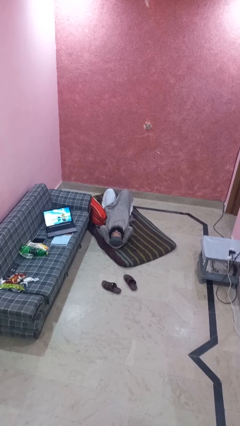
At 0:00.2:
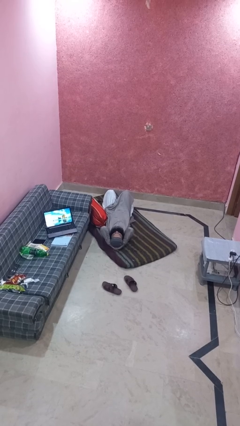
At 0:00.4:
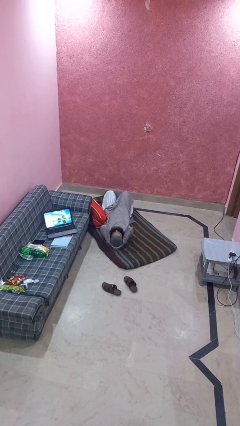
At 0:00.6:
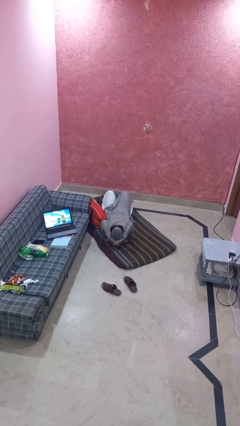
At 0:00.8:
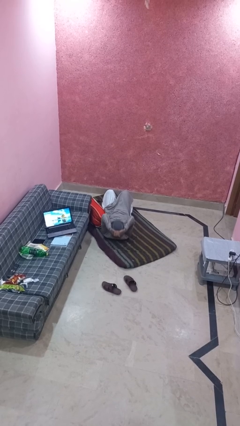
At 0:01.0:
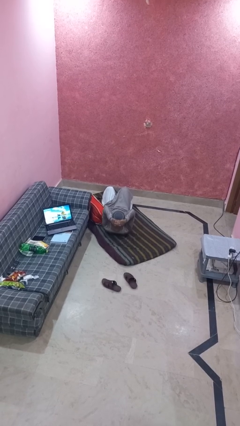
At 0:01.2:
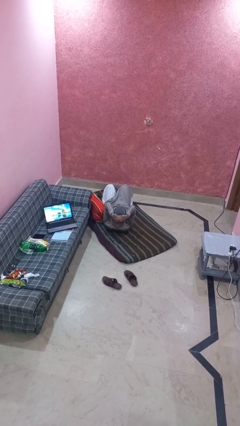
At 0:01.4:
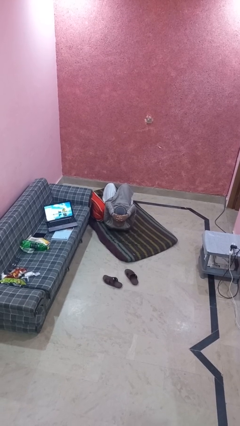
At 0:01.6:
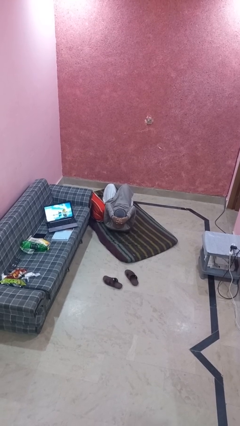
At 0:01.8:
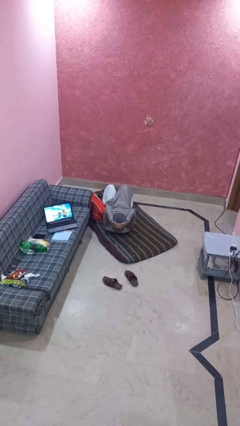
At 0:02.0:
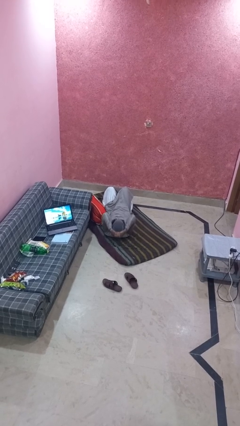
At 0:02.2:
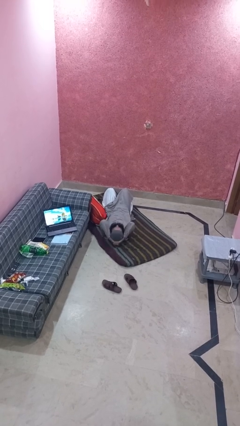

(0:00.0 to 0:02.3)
person exercises with situp

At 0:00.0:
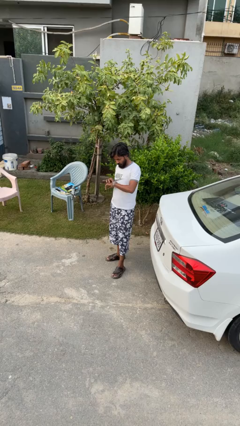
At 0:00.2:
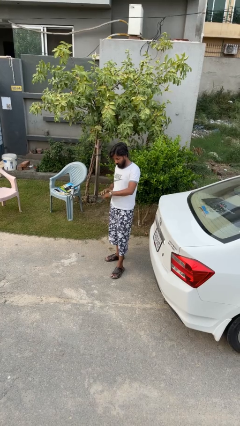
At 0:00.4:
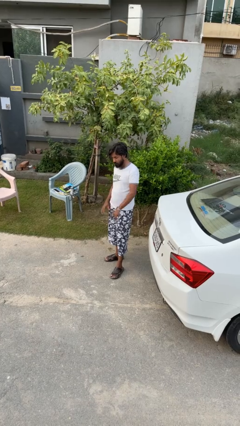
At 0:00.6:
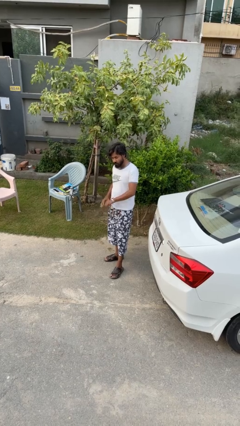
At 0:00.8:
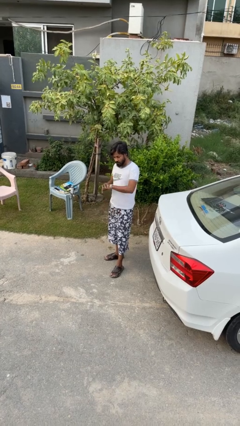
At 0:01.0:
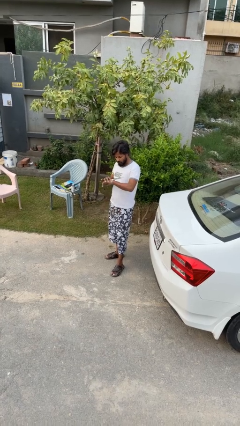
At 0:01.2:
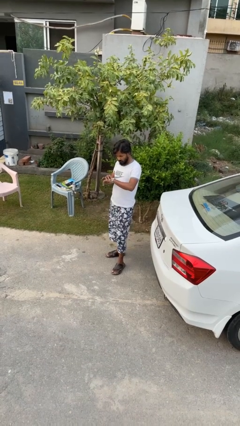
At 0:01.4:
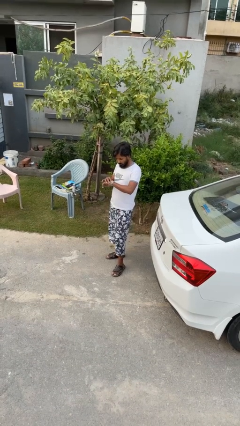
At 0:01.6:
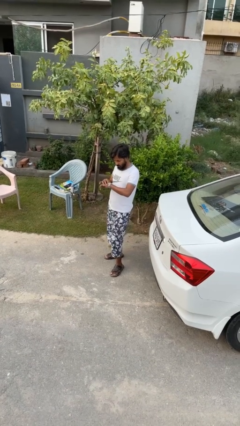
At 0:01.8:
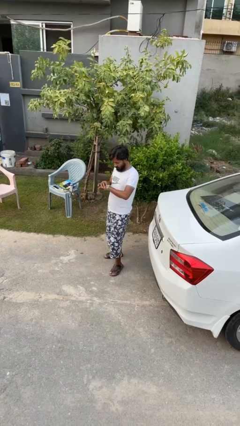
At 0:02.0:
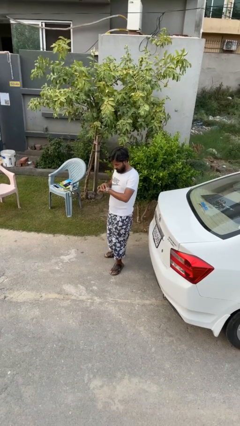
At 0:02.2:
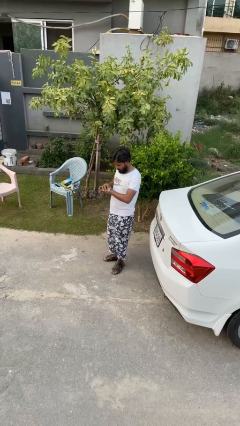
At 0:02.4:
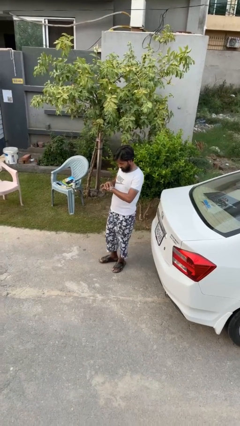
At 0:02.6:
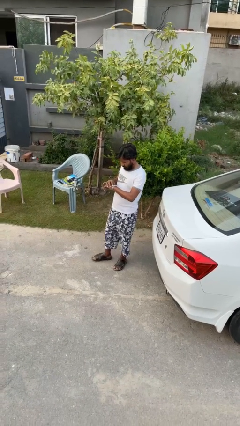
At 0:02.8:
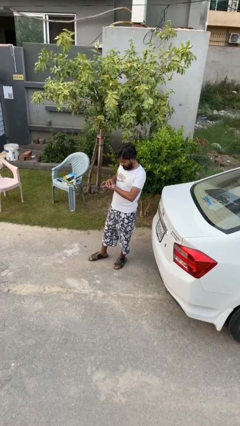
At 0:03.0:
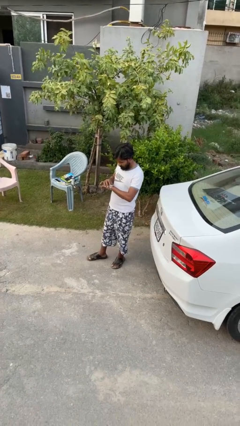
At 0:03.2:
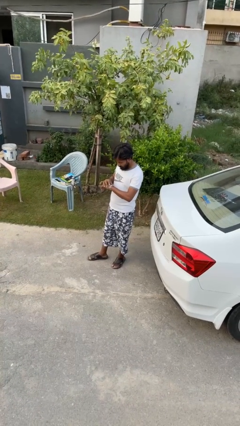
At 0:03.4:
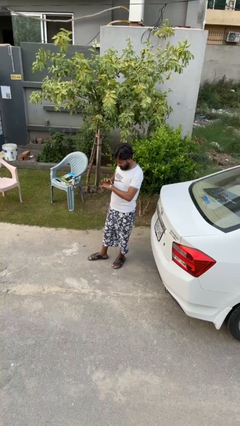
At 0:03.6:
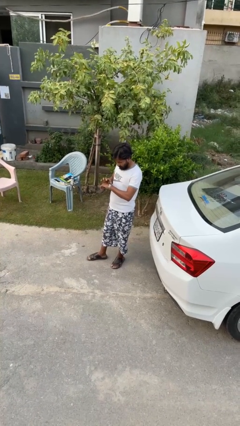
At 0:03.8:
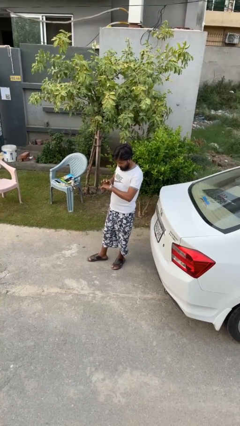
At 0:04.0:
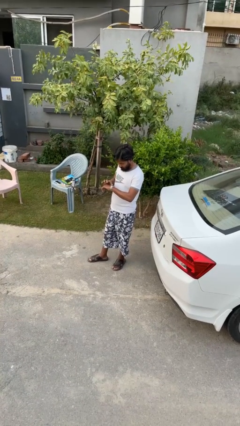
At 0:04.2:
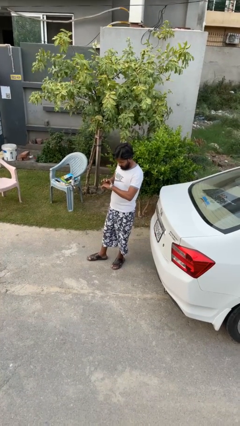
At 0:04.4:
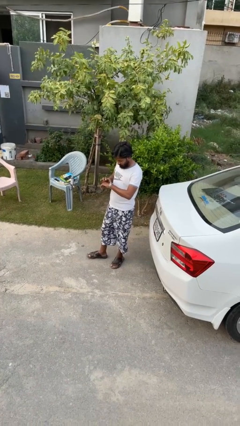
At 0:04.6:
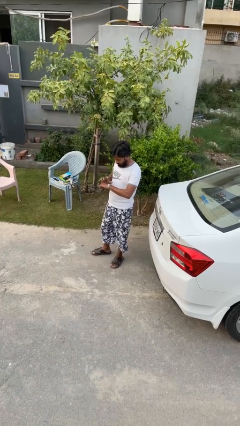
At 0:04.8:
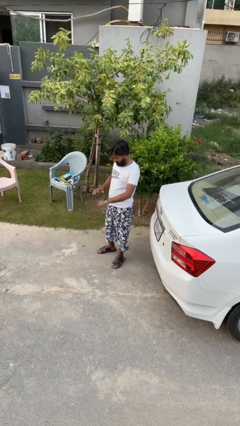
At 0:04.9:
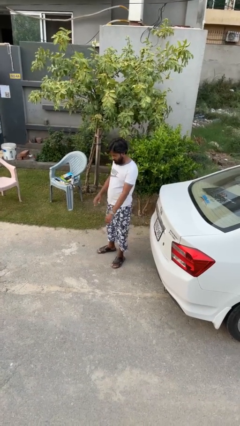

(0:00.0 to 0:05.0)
person looks at wristwatch

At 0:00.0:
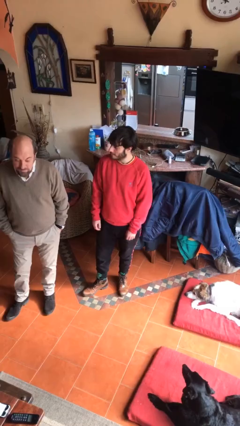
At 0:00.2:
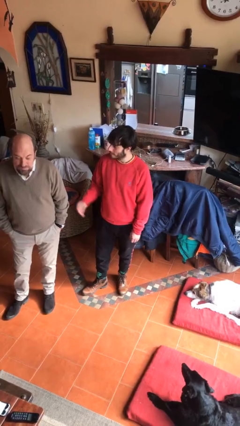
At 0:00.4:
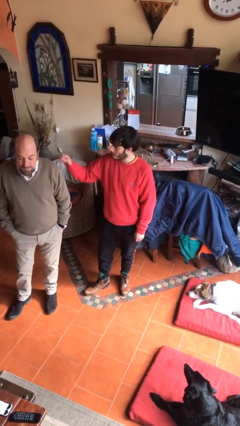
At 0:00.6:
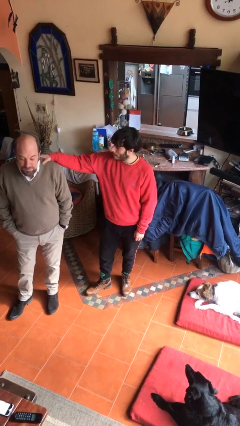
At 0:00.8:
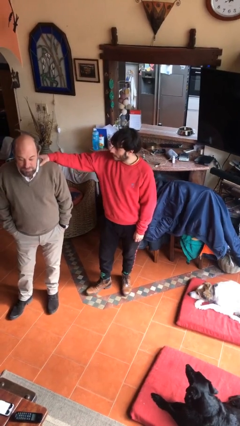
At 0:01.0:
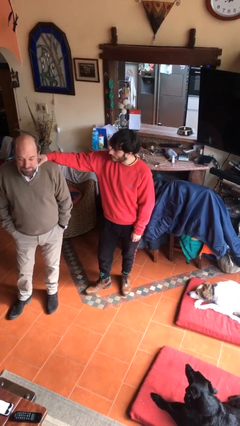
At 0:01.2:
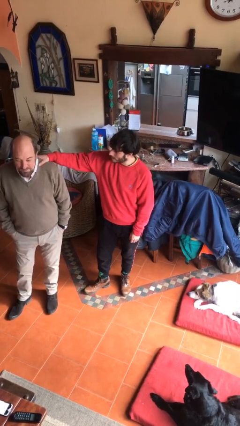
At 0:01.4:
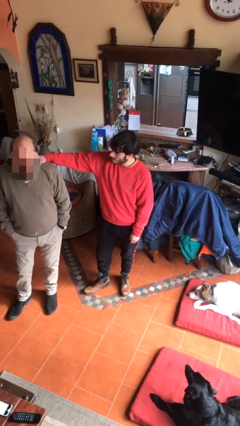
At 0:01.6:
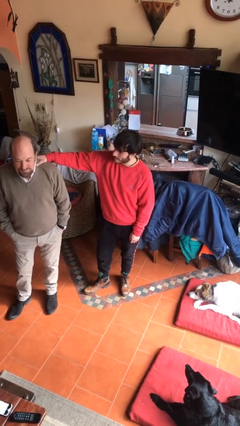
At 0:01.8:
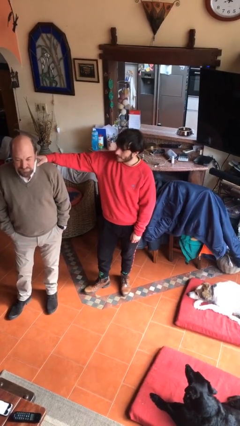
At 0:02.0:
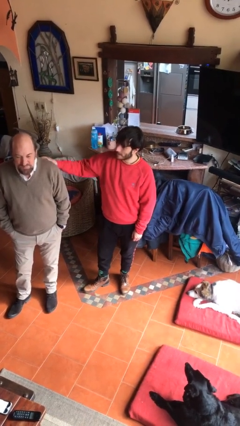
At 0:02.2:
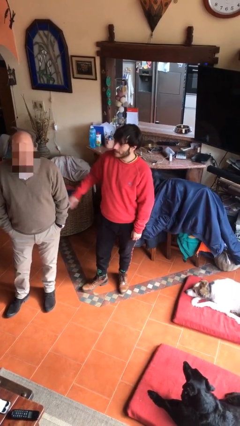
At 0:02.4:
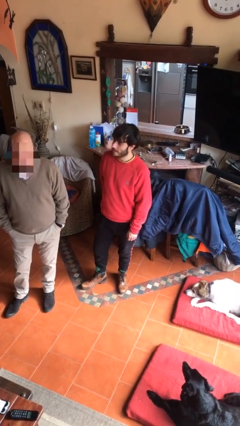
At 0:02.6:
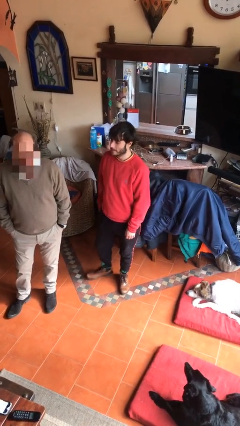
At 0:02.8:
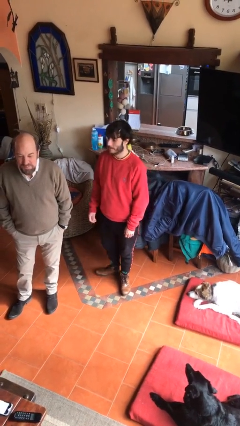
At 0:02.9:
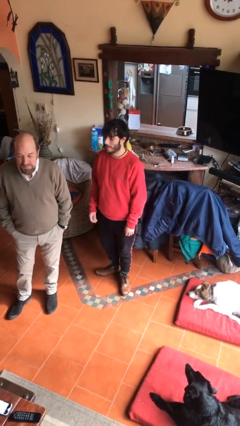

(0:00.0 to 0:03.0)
person pounds shoulders of person

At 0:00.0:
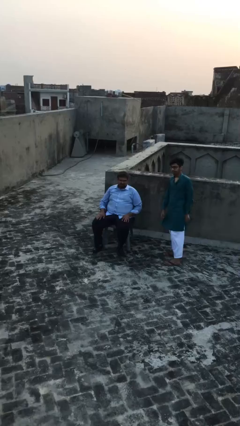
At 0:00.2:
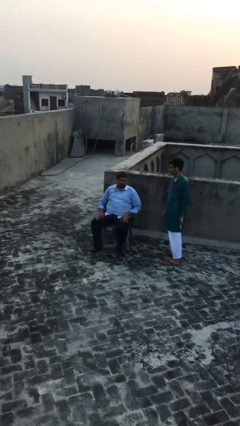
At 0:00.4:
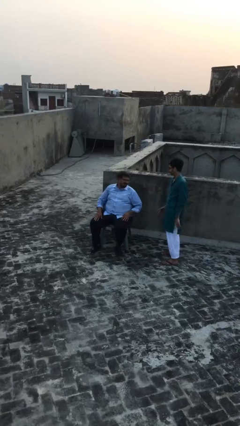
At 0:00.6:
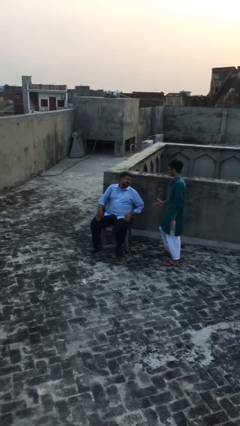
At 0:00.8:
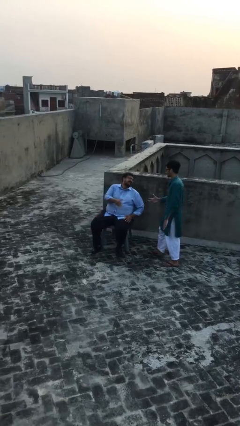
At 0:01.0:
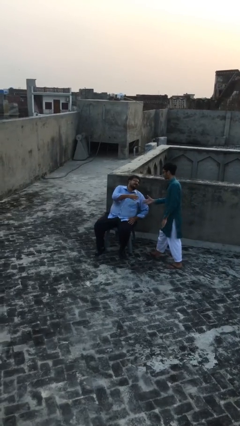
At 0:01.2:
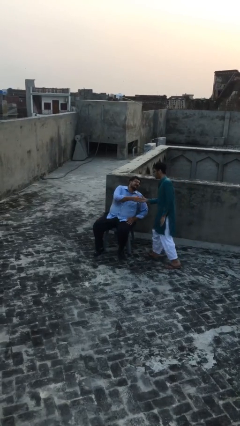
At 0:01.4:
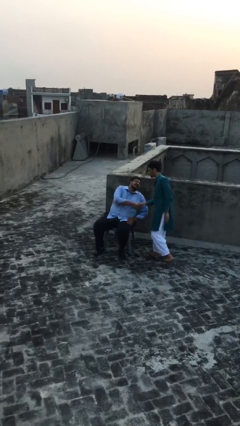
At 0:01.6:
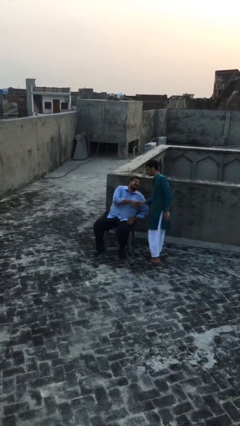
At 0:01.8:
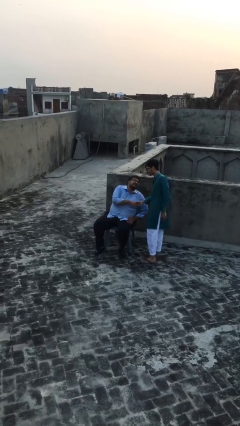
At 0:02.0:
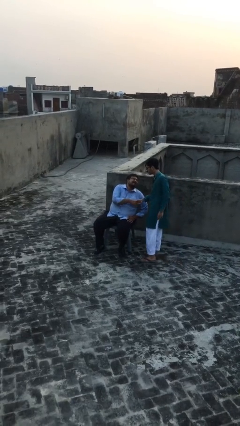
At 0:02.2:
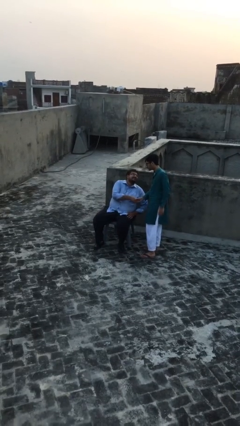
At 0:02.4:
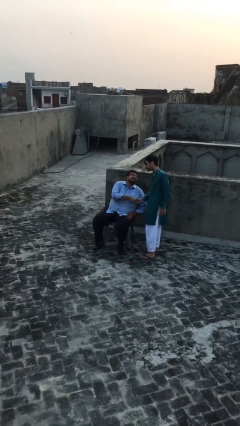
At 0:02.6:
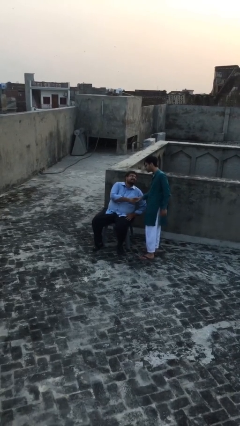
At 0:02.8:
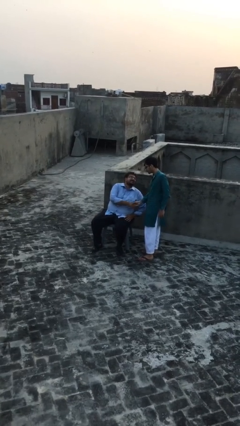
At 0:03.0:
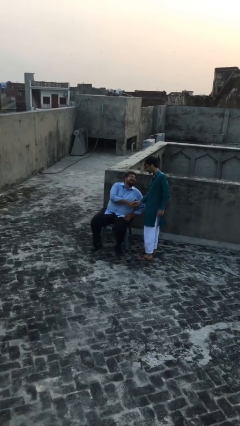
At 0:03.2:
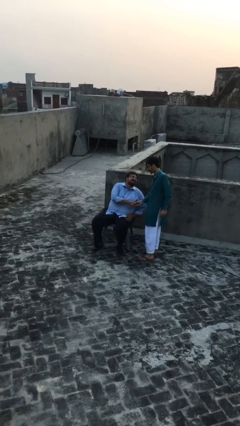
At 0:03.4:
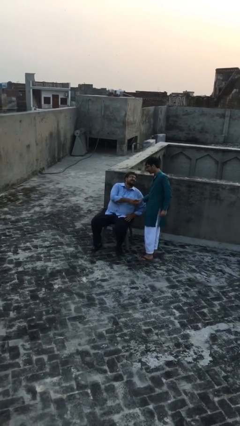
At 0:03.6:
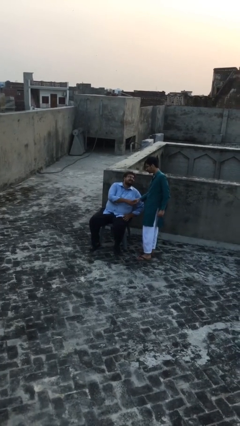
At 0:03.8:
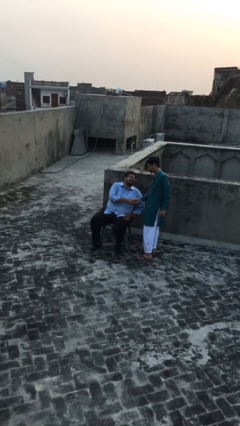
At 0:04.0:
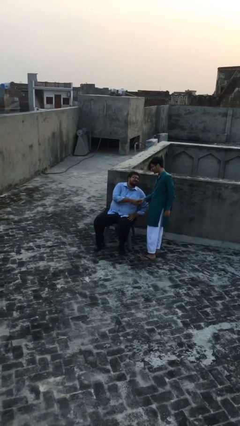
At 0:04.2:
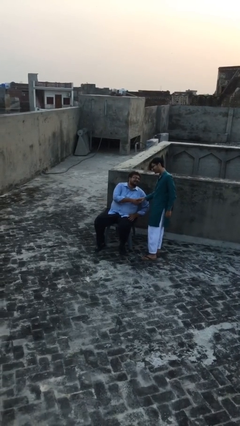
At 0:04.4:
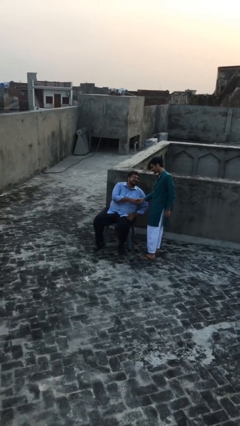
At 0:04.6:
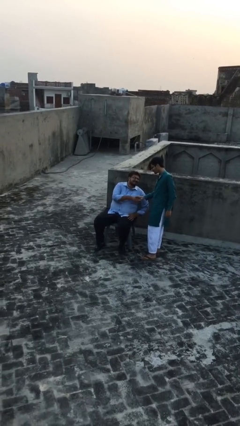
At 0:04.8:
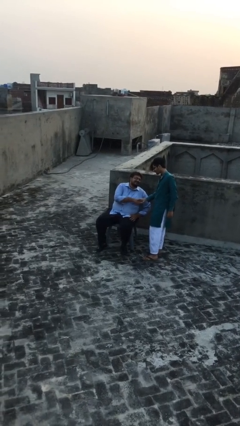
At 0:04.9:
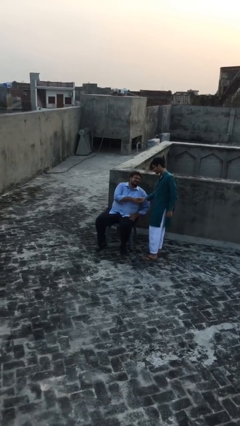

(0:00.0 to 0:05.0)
person shakes hand

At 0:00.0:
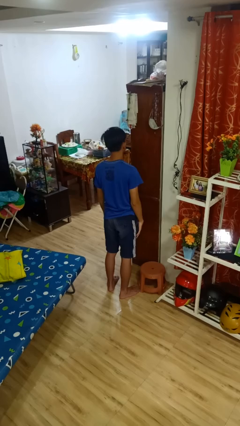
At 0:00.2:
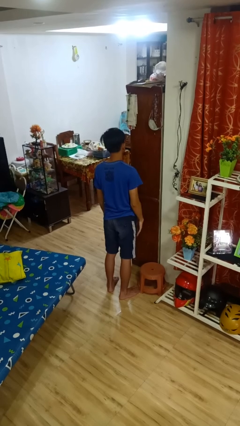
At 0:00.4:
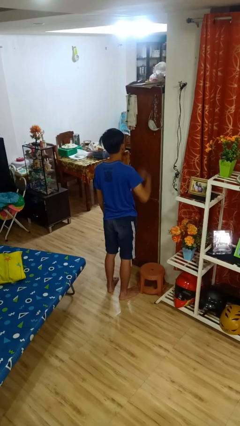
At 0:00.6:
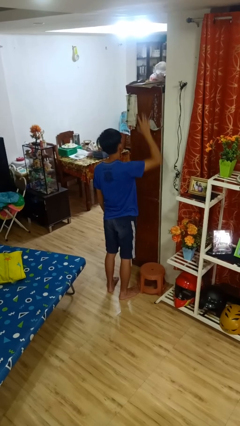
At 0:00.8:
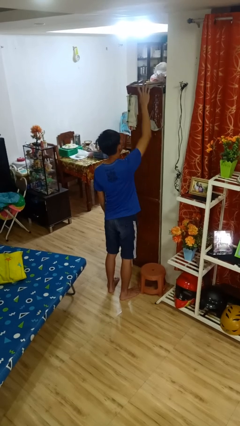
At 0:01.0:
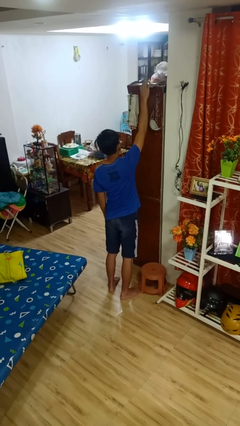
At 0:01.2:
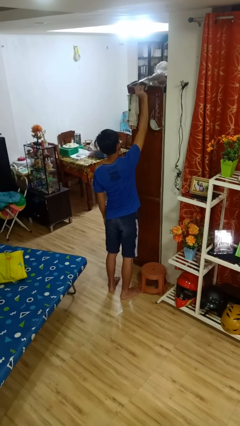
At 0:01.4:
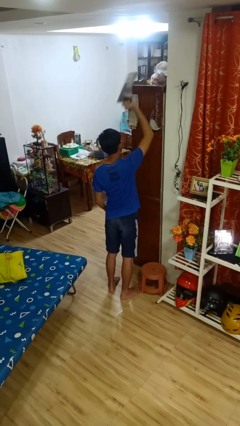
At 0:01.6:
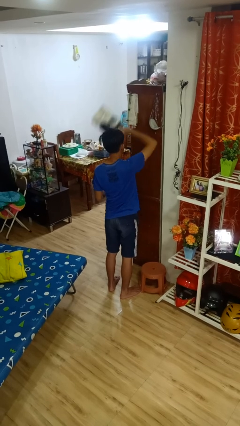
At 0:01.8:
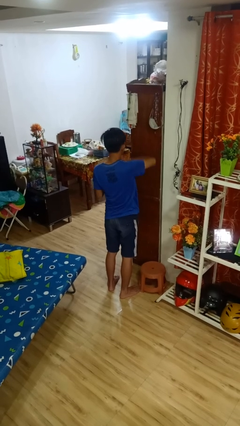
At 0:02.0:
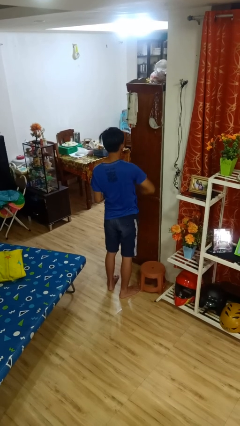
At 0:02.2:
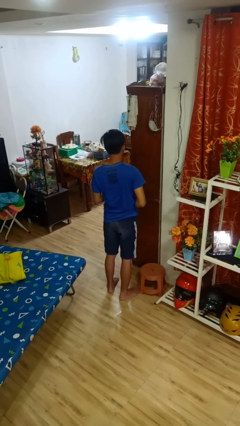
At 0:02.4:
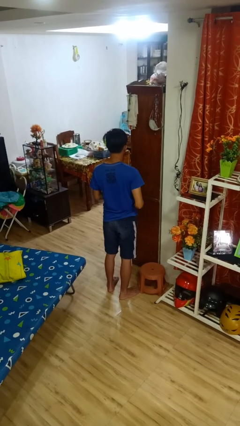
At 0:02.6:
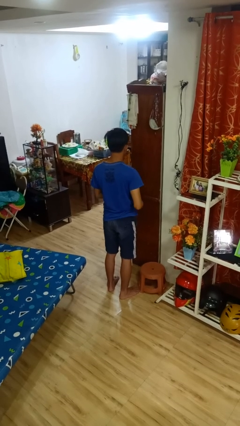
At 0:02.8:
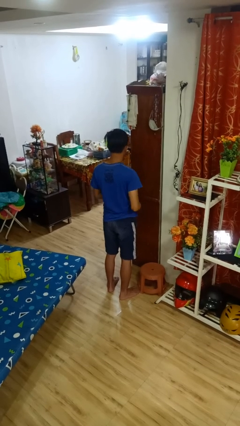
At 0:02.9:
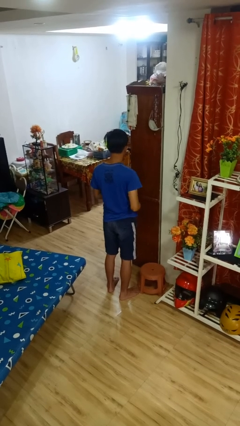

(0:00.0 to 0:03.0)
person picks up object from shelf
